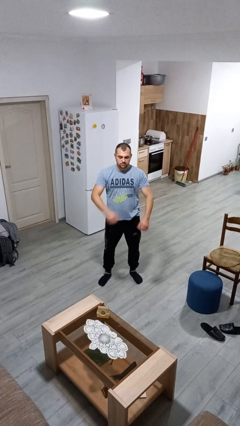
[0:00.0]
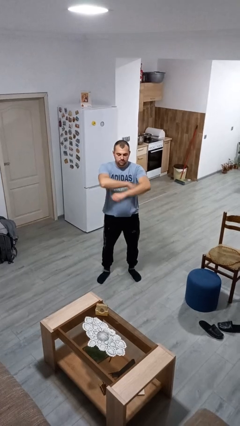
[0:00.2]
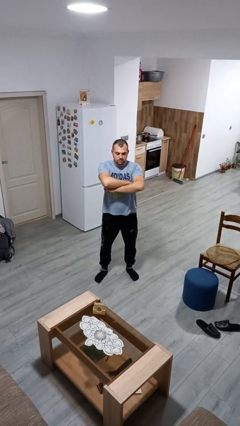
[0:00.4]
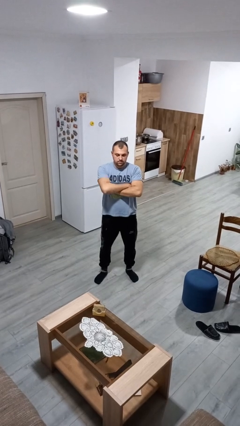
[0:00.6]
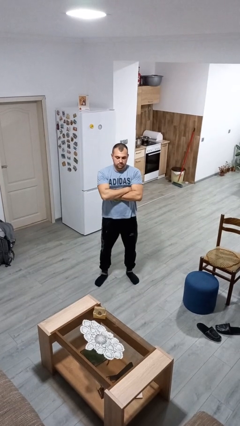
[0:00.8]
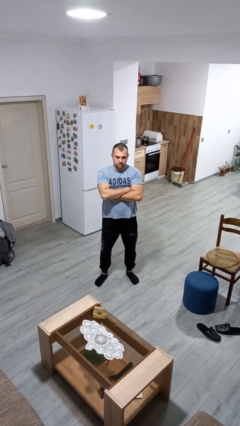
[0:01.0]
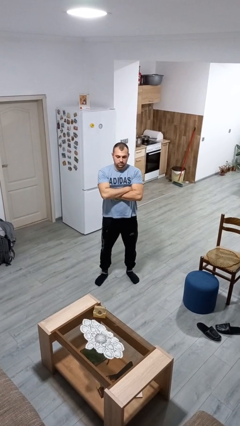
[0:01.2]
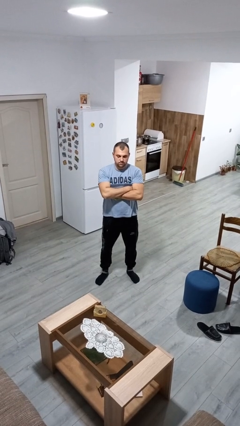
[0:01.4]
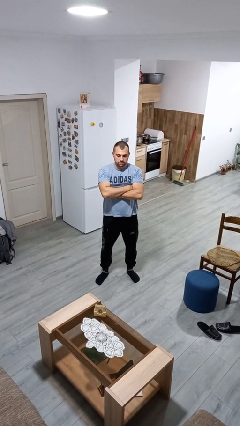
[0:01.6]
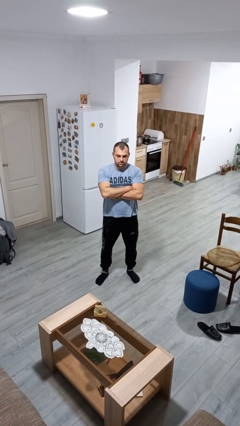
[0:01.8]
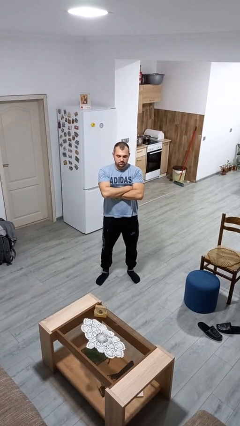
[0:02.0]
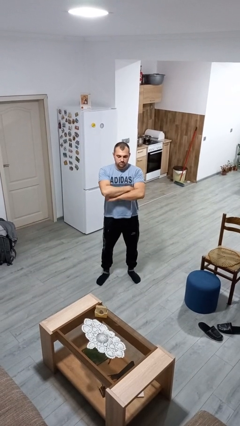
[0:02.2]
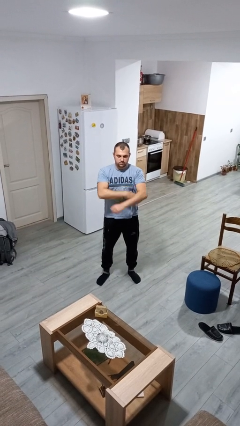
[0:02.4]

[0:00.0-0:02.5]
person crosses arms

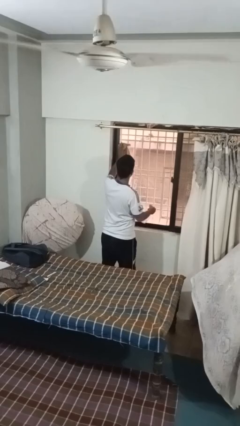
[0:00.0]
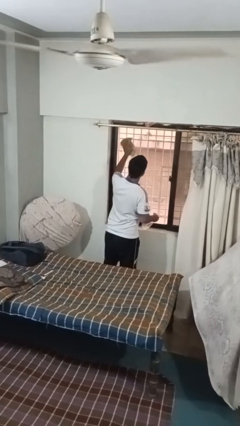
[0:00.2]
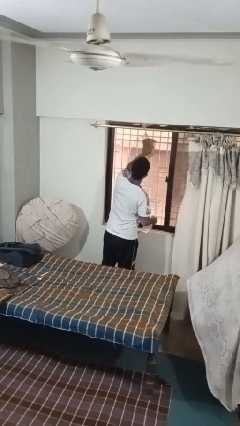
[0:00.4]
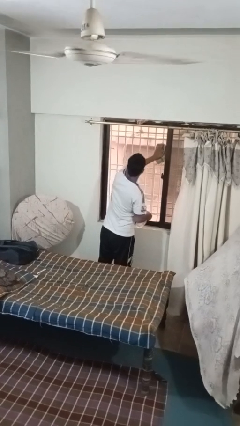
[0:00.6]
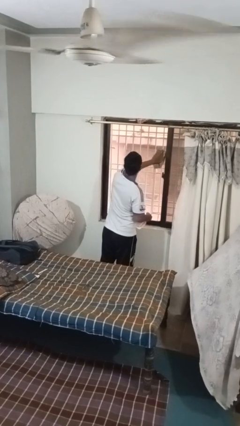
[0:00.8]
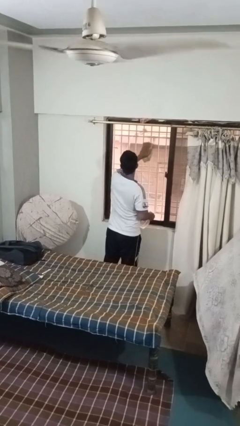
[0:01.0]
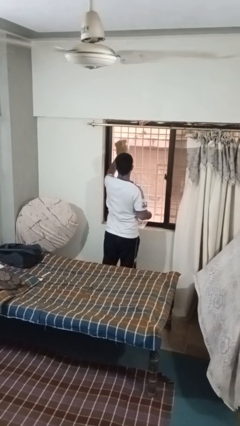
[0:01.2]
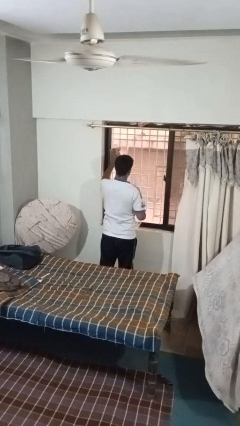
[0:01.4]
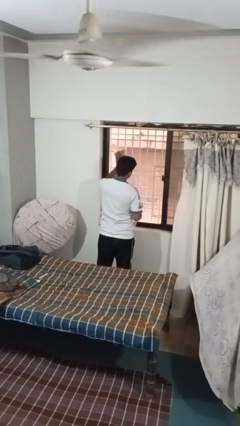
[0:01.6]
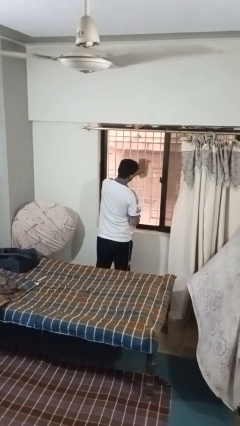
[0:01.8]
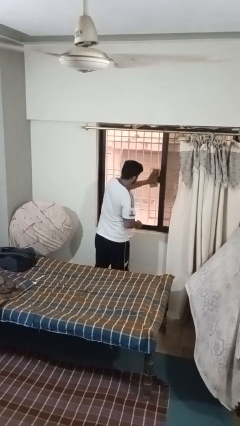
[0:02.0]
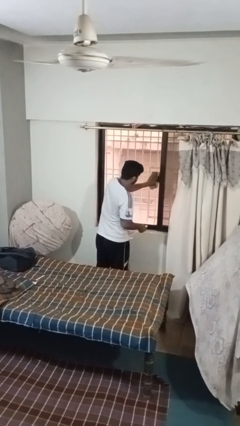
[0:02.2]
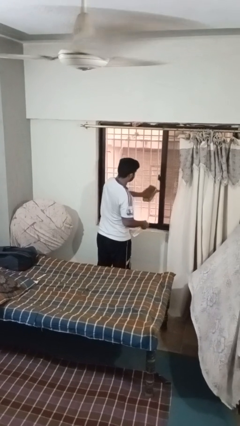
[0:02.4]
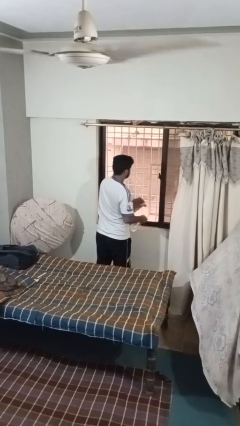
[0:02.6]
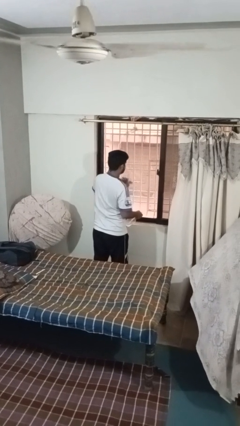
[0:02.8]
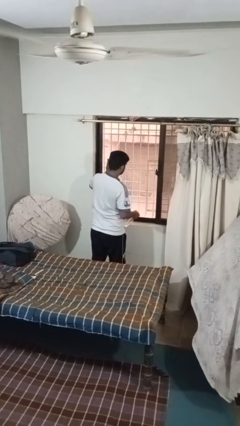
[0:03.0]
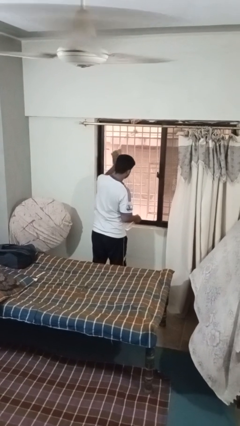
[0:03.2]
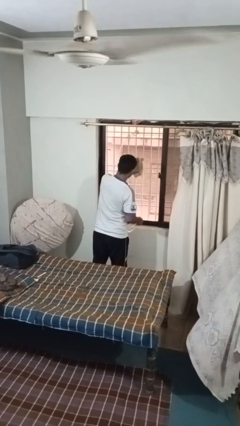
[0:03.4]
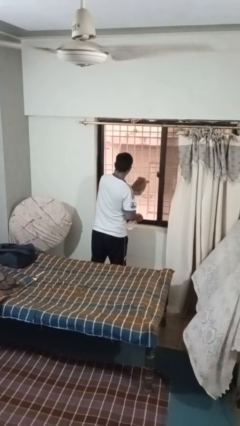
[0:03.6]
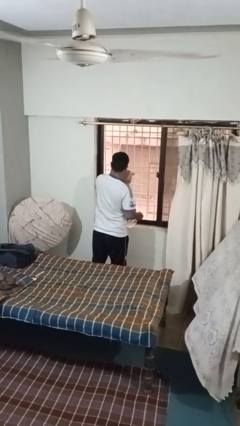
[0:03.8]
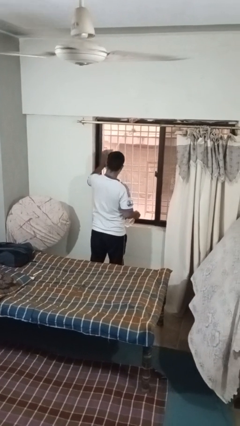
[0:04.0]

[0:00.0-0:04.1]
person washes window

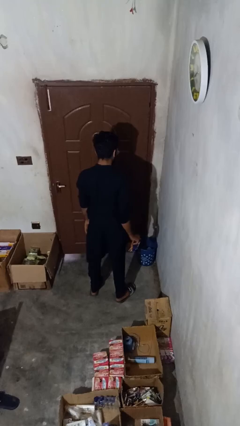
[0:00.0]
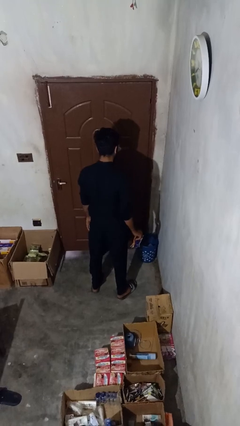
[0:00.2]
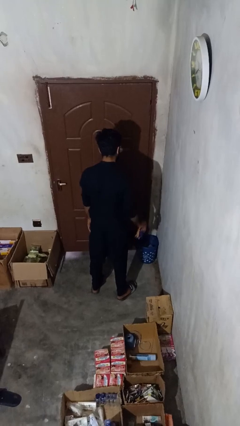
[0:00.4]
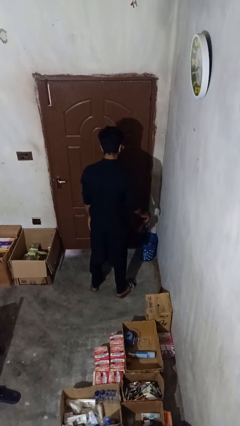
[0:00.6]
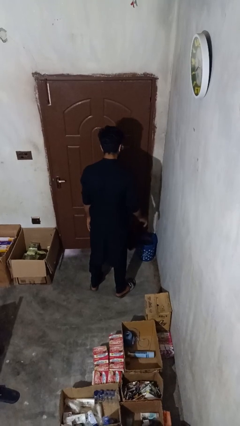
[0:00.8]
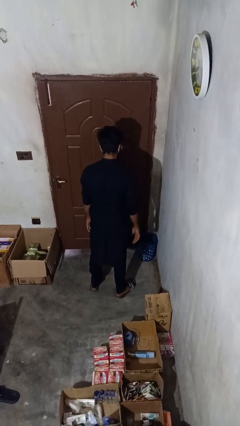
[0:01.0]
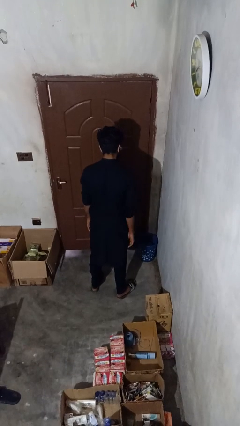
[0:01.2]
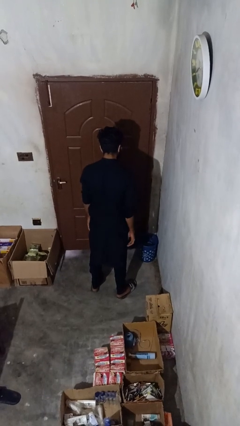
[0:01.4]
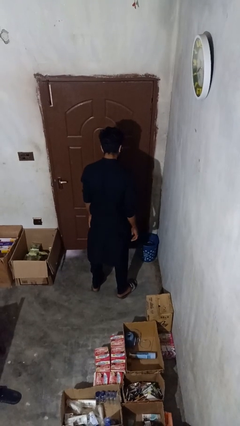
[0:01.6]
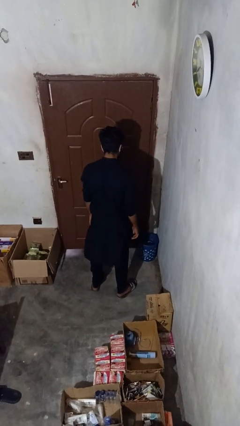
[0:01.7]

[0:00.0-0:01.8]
person discards trash

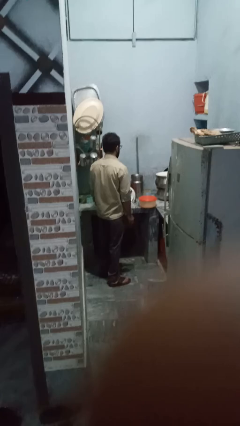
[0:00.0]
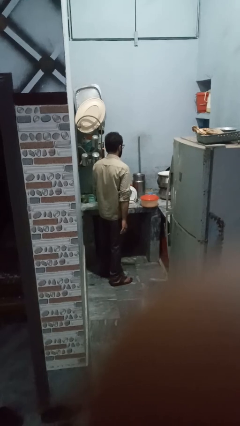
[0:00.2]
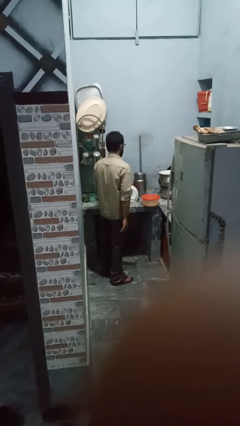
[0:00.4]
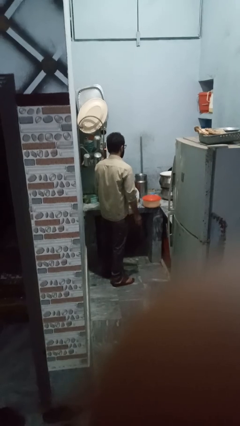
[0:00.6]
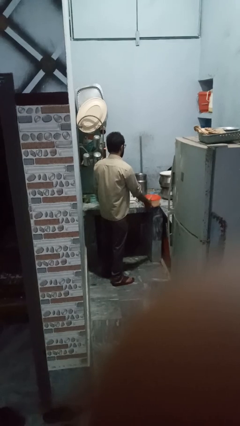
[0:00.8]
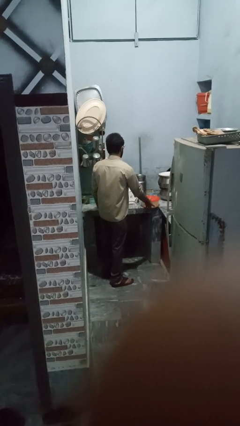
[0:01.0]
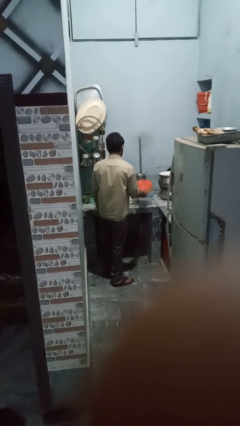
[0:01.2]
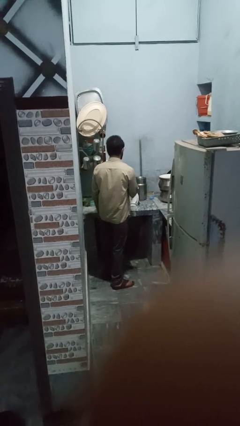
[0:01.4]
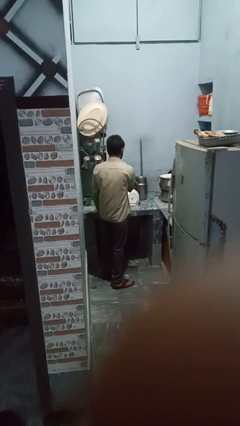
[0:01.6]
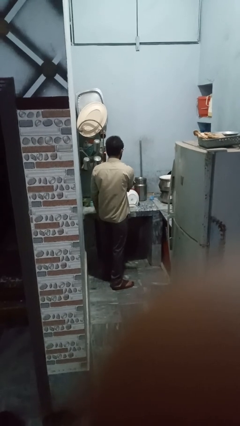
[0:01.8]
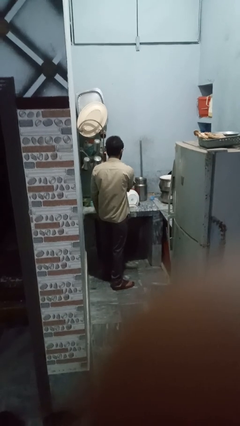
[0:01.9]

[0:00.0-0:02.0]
person loads dishwasher

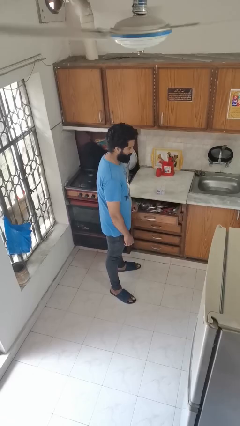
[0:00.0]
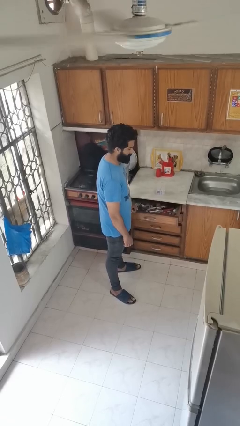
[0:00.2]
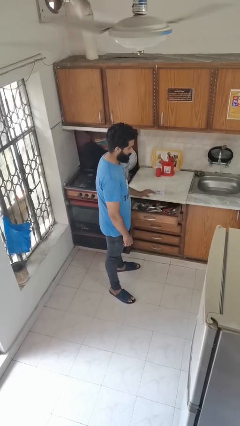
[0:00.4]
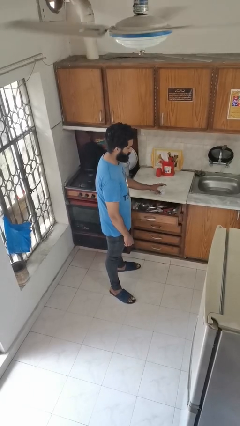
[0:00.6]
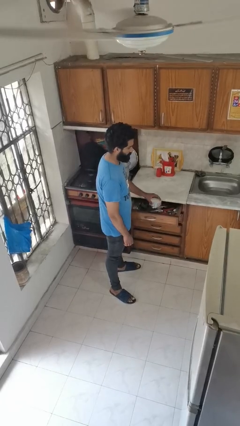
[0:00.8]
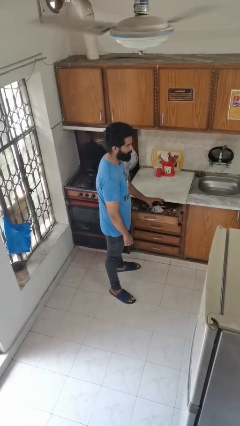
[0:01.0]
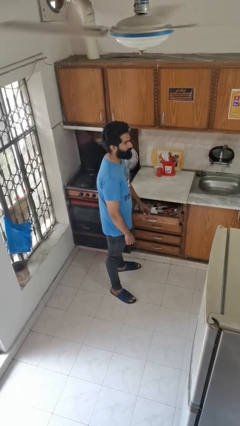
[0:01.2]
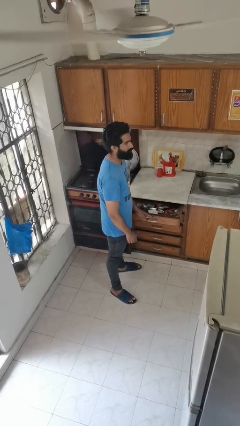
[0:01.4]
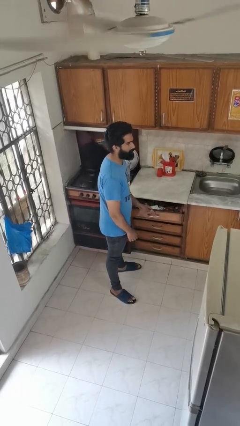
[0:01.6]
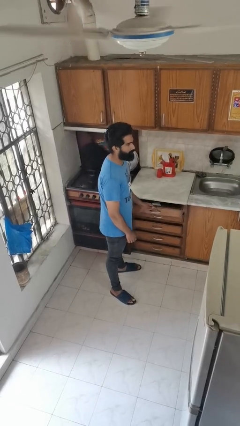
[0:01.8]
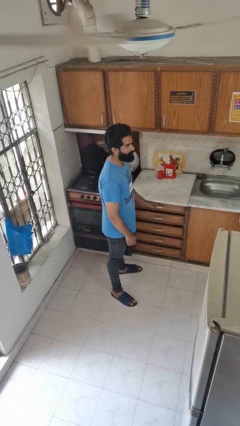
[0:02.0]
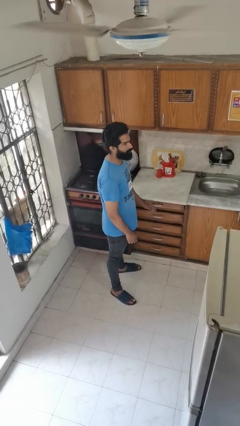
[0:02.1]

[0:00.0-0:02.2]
person puts object into kitchen drawer

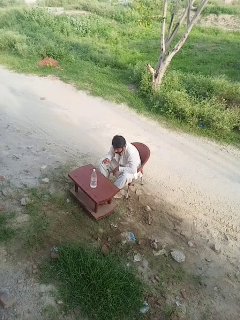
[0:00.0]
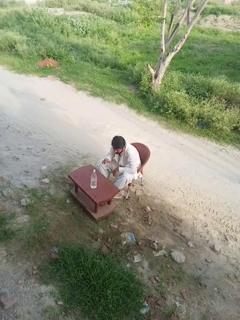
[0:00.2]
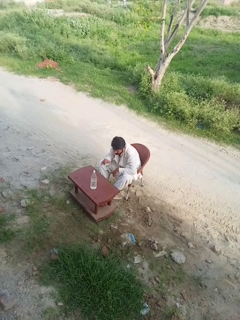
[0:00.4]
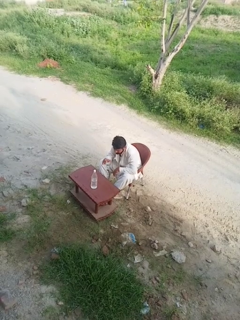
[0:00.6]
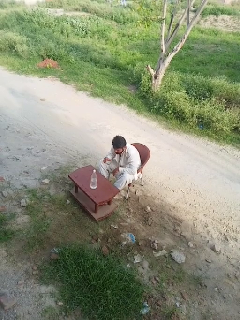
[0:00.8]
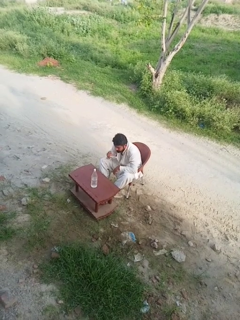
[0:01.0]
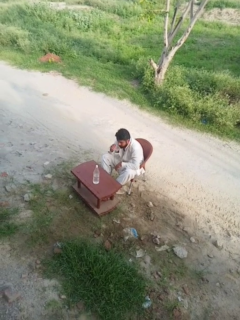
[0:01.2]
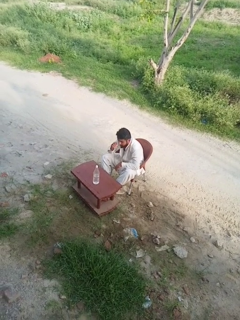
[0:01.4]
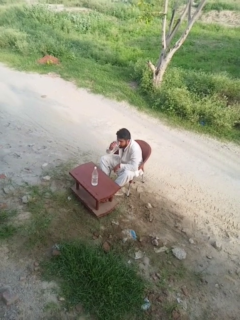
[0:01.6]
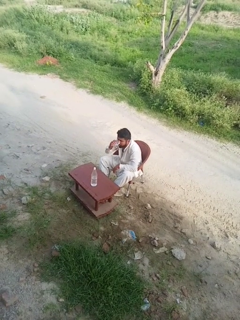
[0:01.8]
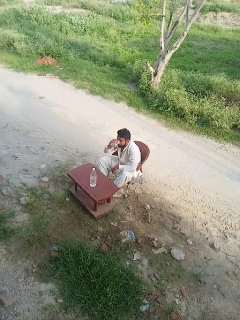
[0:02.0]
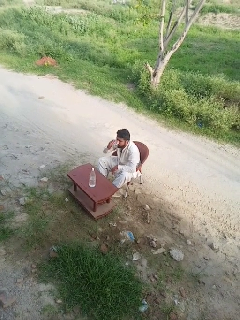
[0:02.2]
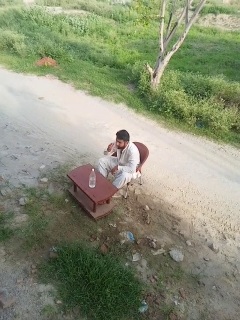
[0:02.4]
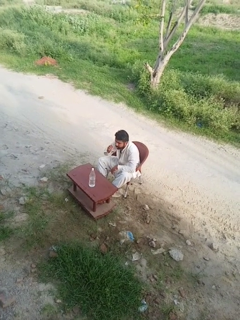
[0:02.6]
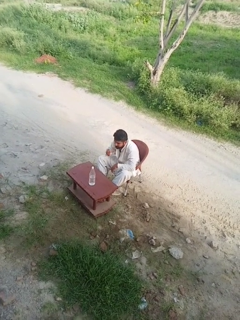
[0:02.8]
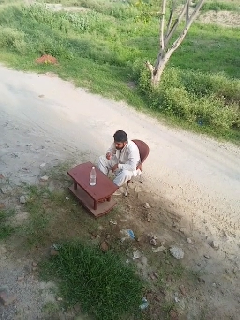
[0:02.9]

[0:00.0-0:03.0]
person drinks from mug

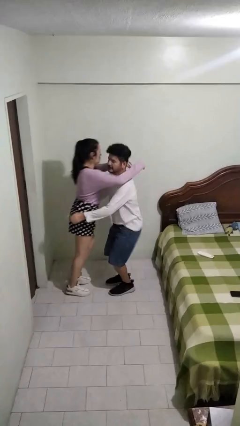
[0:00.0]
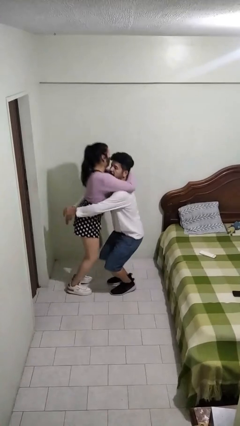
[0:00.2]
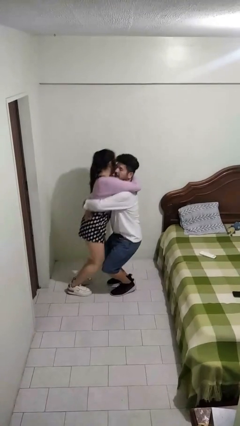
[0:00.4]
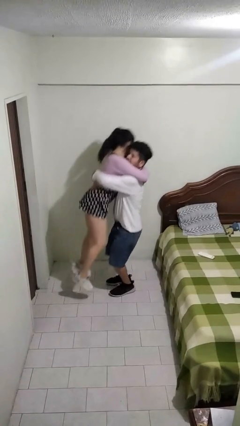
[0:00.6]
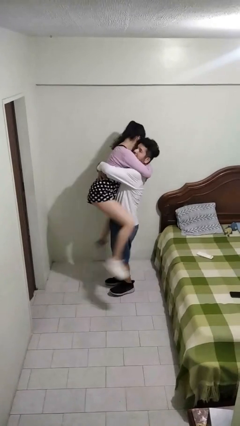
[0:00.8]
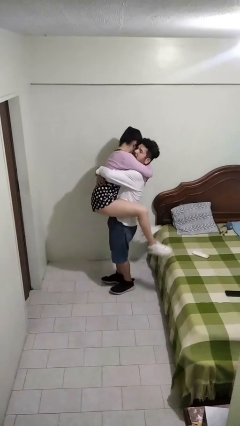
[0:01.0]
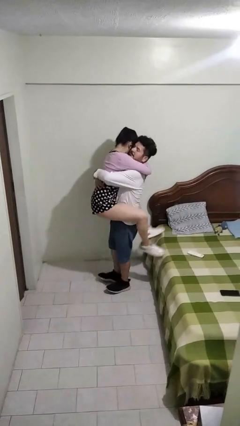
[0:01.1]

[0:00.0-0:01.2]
person picks up person

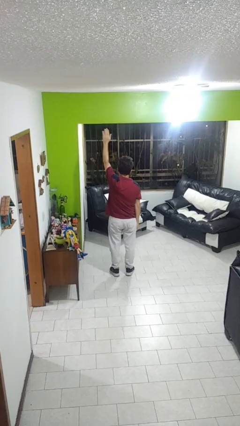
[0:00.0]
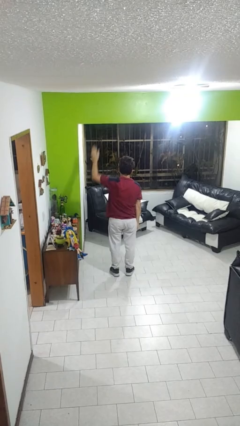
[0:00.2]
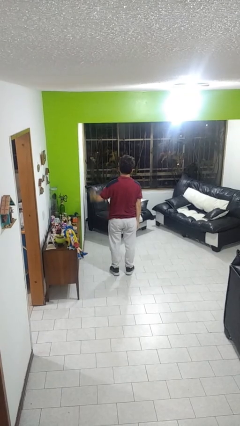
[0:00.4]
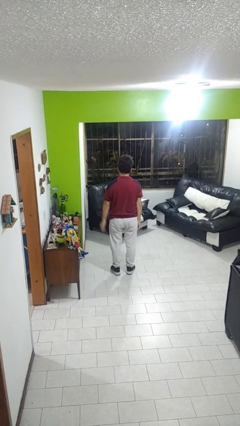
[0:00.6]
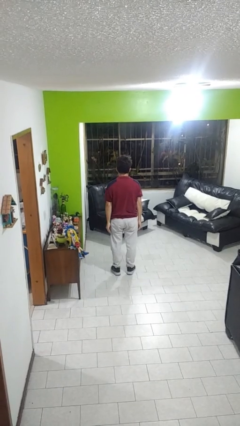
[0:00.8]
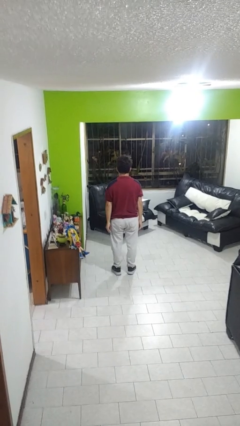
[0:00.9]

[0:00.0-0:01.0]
person gestures lower hand

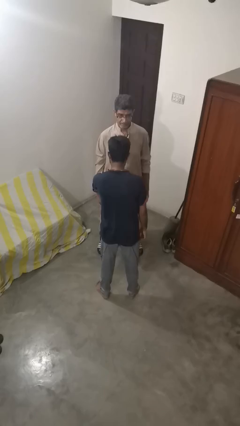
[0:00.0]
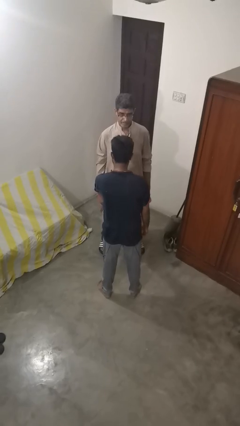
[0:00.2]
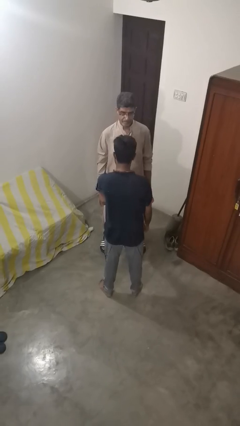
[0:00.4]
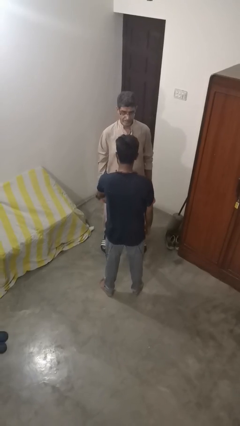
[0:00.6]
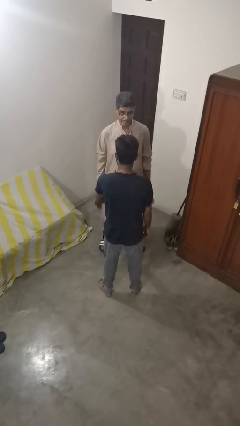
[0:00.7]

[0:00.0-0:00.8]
person grabs person by forearm
